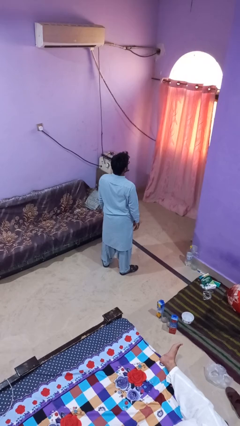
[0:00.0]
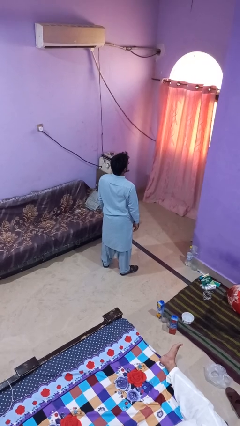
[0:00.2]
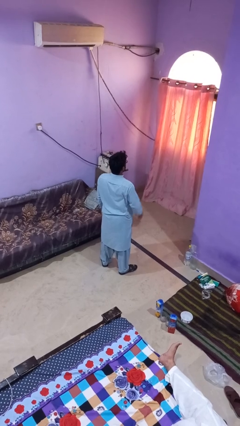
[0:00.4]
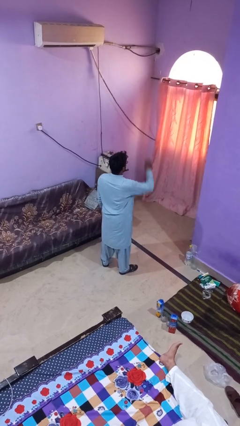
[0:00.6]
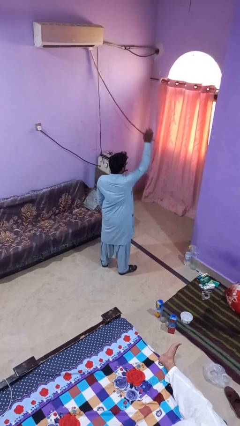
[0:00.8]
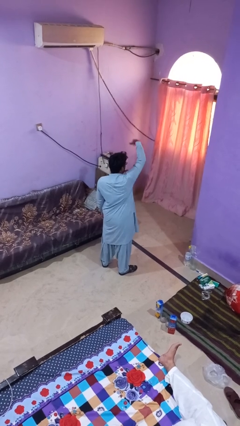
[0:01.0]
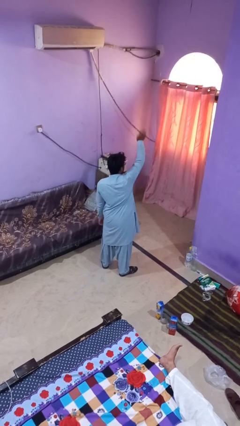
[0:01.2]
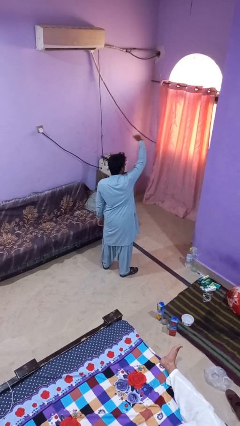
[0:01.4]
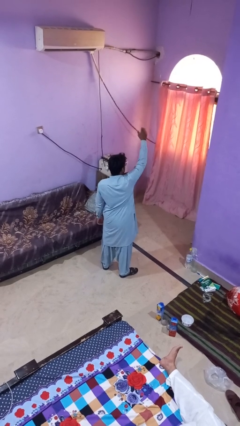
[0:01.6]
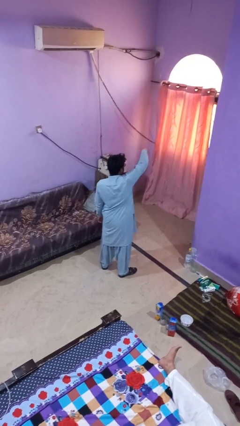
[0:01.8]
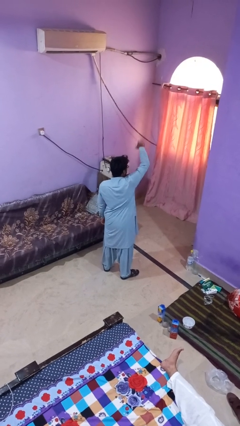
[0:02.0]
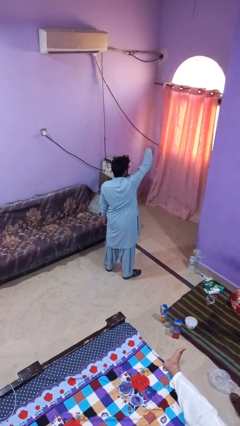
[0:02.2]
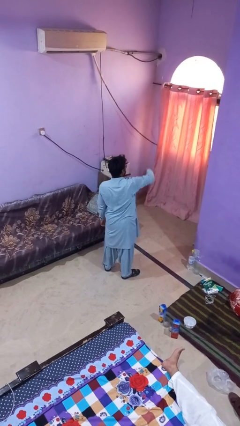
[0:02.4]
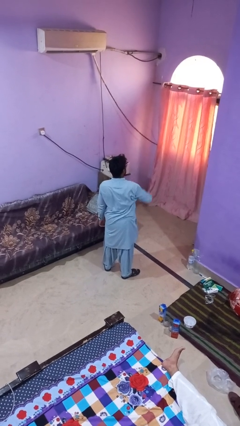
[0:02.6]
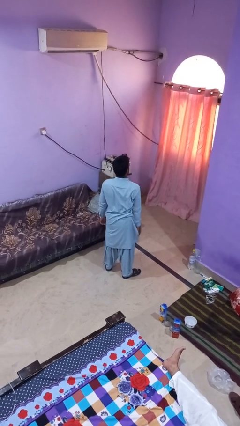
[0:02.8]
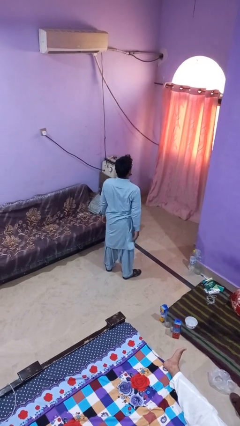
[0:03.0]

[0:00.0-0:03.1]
person gestures come here

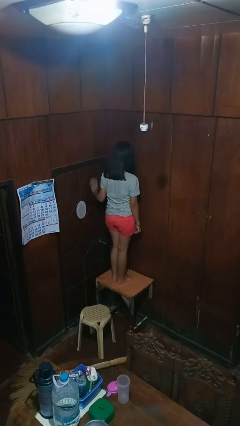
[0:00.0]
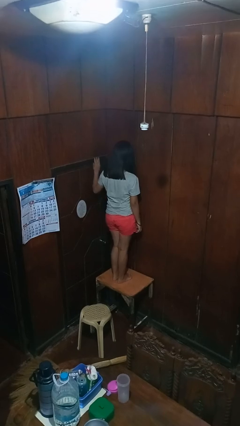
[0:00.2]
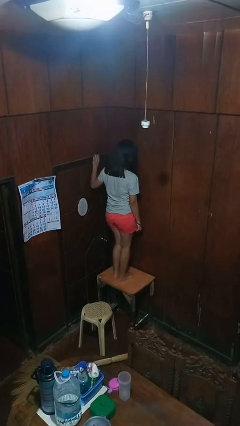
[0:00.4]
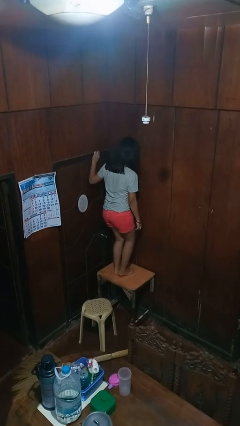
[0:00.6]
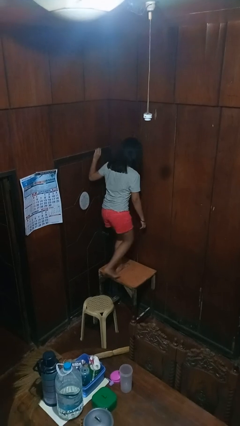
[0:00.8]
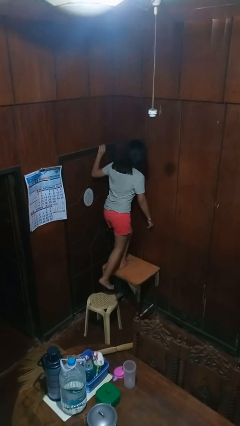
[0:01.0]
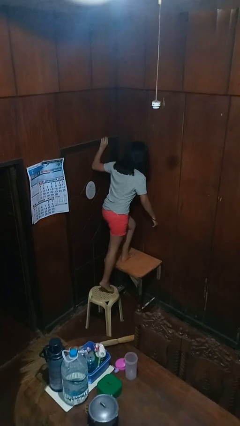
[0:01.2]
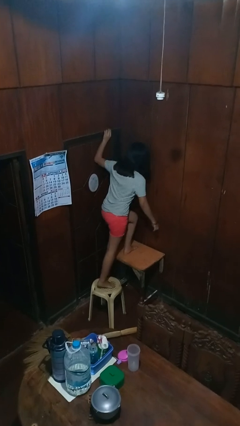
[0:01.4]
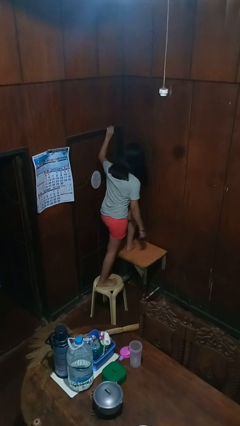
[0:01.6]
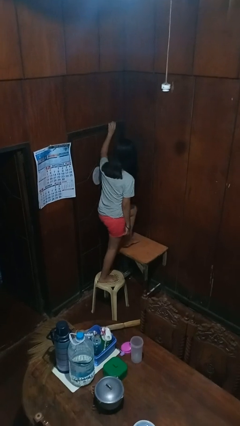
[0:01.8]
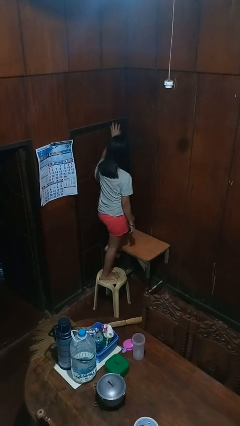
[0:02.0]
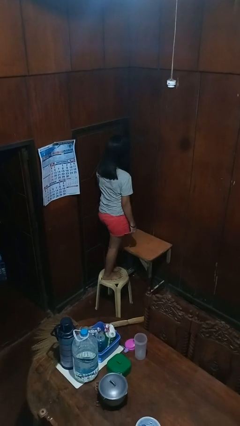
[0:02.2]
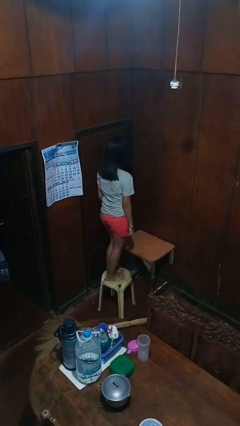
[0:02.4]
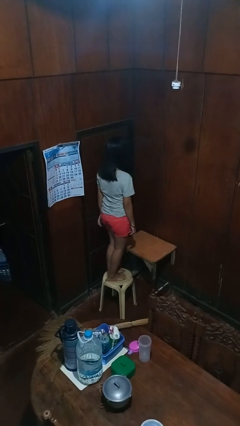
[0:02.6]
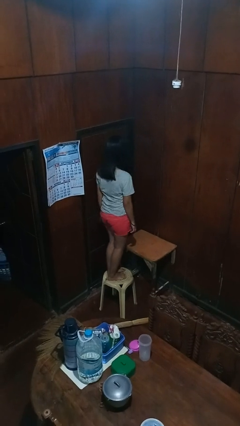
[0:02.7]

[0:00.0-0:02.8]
person climbs off table

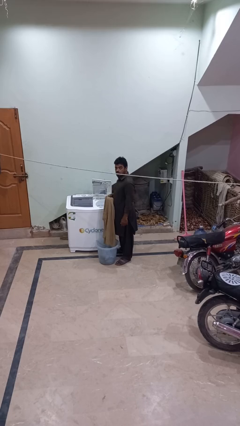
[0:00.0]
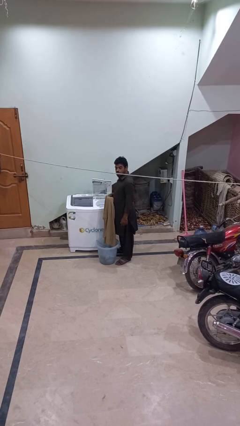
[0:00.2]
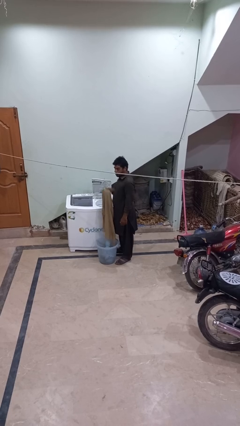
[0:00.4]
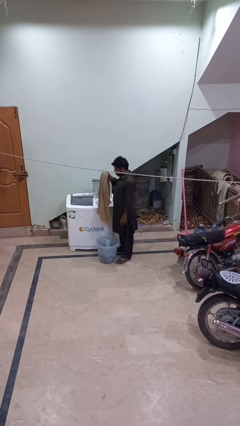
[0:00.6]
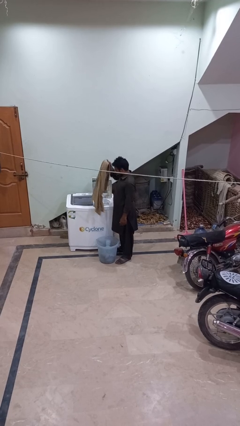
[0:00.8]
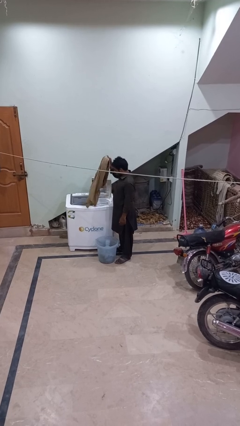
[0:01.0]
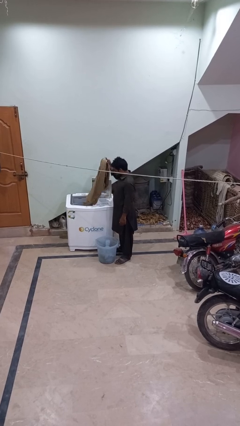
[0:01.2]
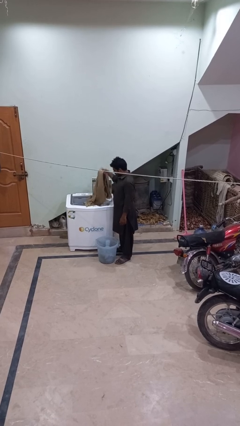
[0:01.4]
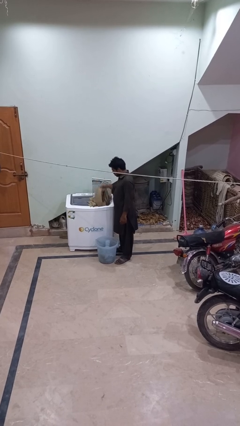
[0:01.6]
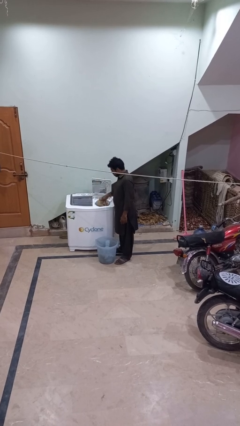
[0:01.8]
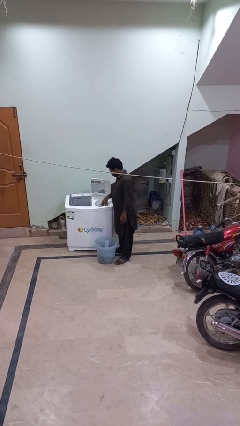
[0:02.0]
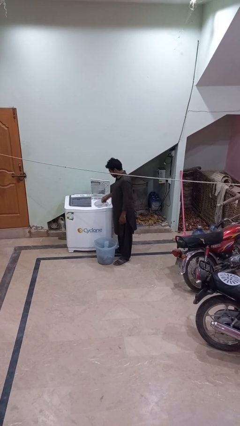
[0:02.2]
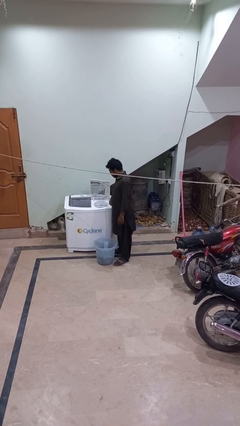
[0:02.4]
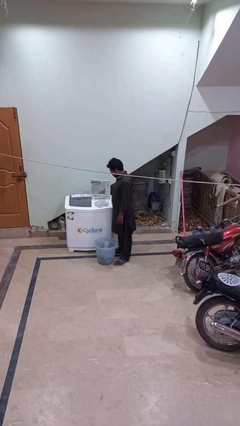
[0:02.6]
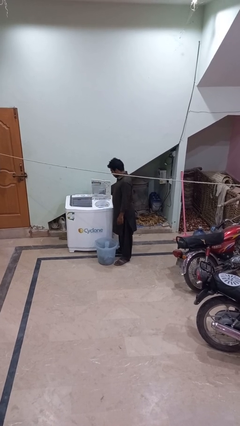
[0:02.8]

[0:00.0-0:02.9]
person loads dryer

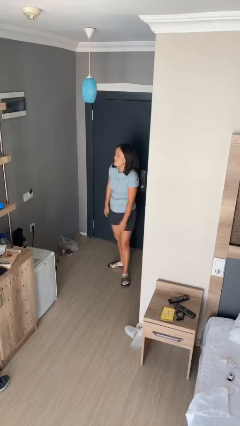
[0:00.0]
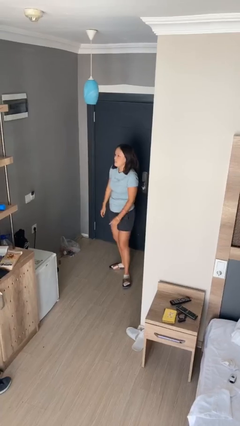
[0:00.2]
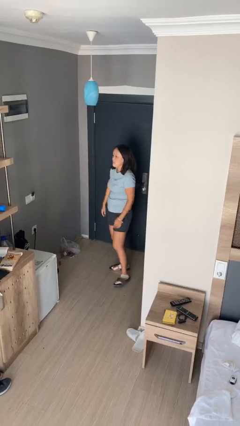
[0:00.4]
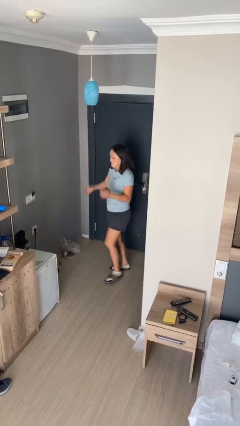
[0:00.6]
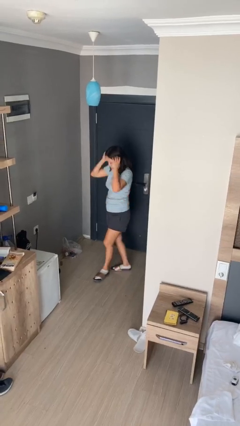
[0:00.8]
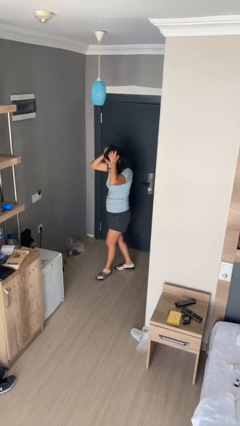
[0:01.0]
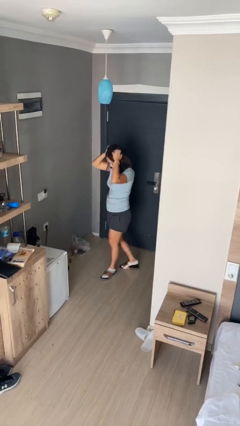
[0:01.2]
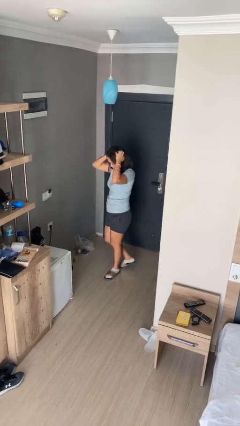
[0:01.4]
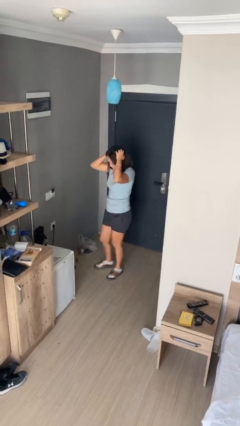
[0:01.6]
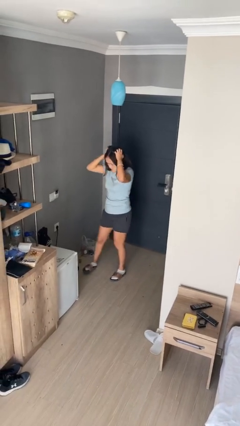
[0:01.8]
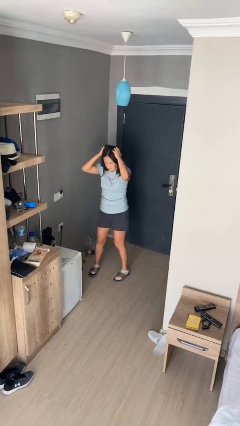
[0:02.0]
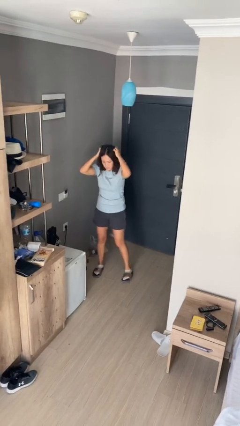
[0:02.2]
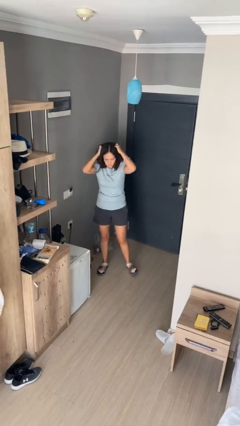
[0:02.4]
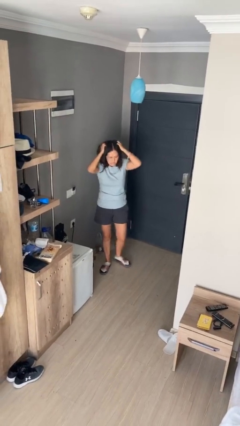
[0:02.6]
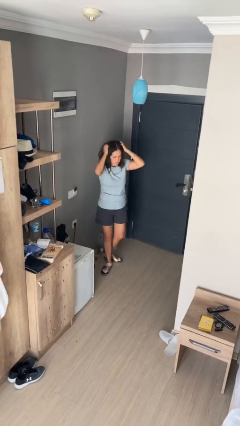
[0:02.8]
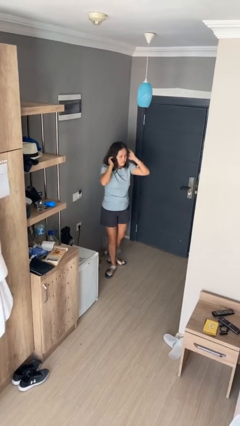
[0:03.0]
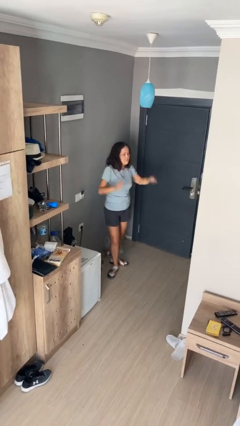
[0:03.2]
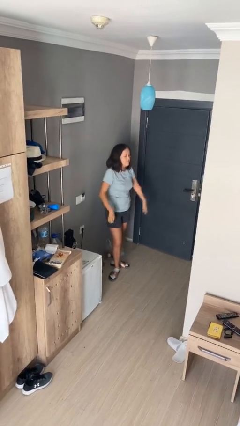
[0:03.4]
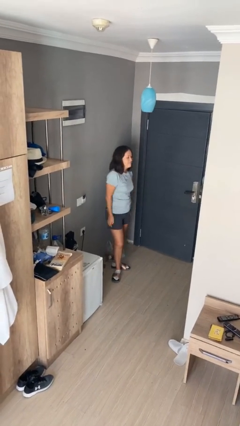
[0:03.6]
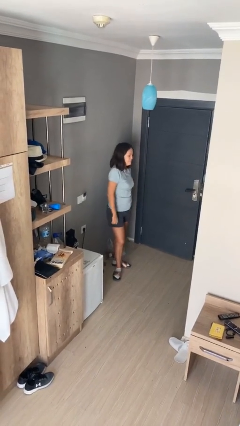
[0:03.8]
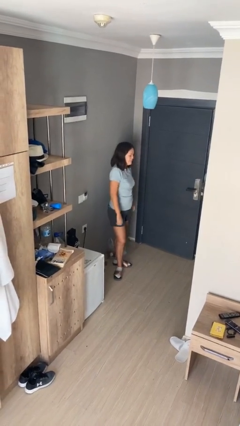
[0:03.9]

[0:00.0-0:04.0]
person scratches face

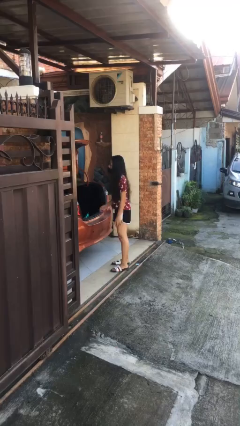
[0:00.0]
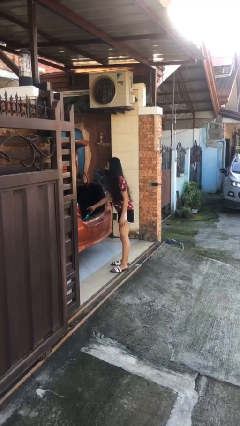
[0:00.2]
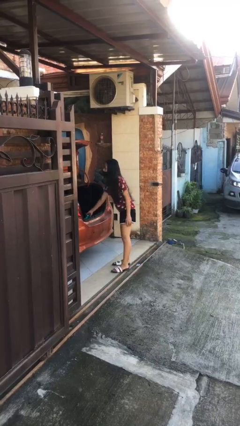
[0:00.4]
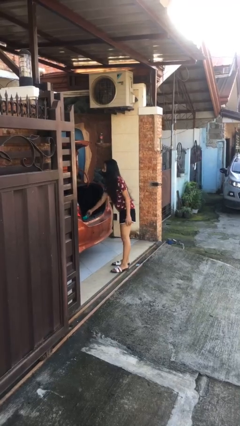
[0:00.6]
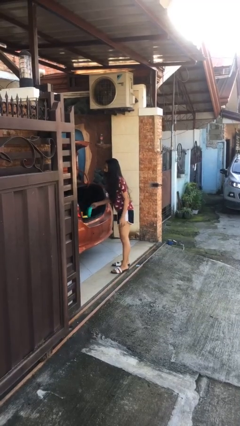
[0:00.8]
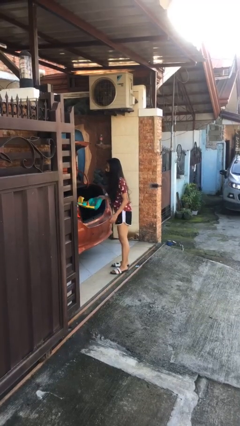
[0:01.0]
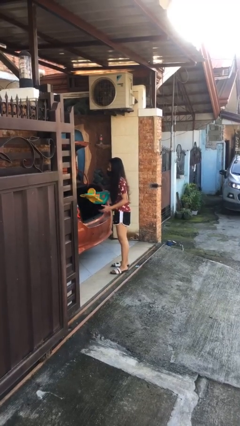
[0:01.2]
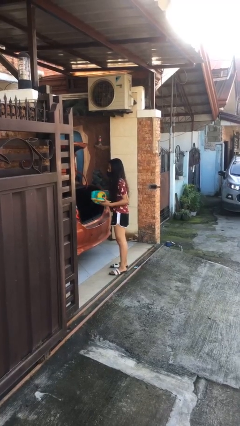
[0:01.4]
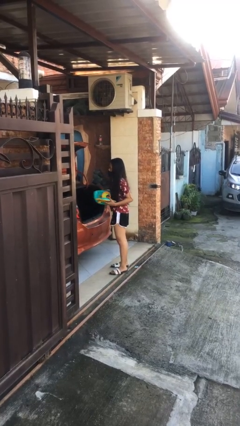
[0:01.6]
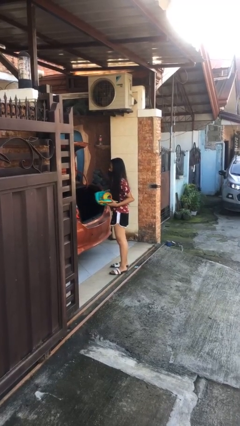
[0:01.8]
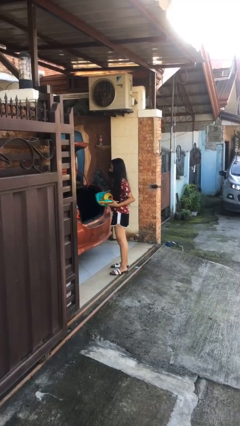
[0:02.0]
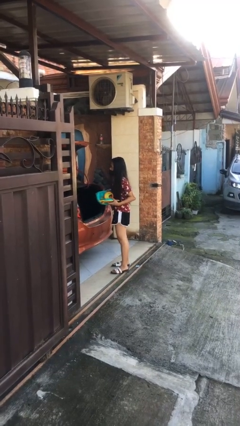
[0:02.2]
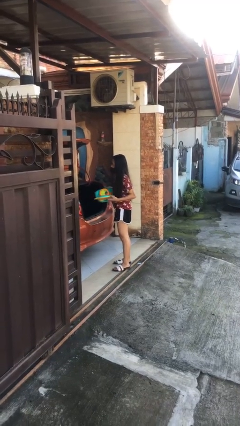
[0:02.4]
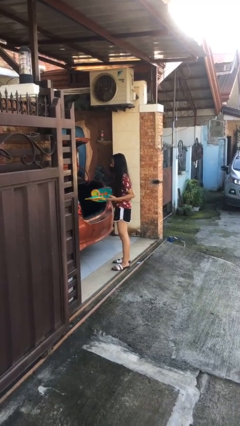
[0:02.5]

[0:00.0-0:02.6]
person unloads car

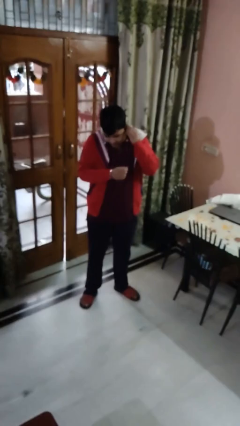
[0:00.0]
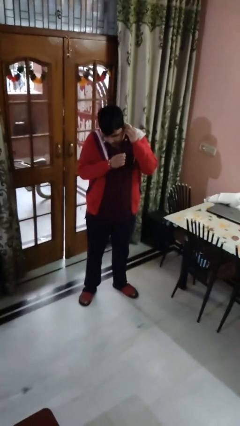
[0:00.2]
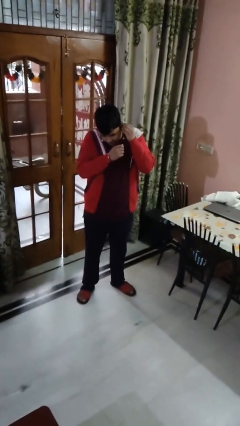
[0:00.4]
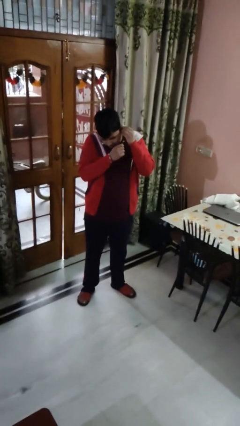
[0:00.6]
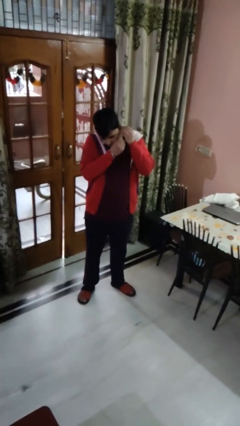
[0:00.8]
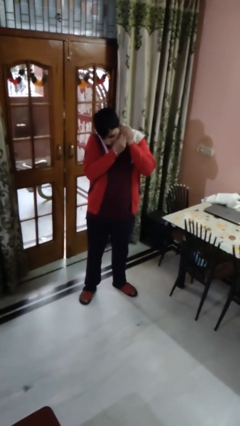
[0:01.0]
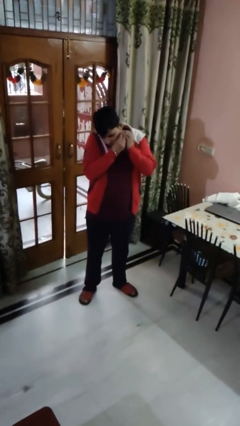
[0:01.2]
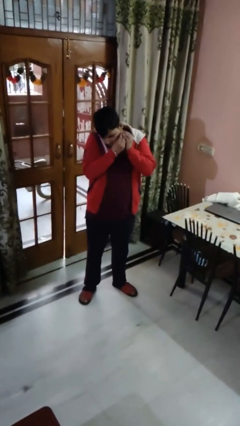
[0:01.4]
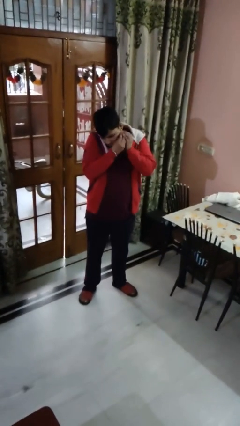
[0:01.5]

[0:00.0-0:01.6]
person puts on earrings

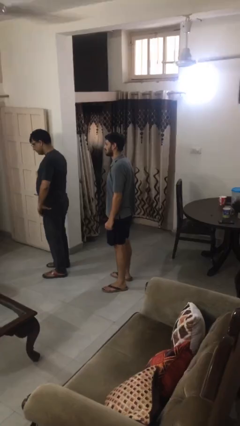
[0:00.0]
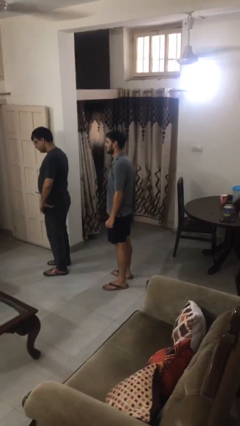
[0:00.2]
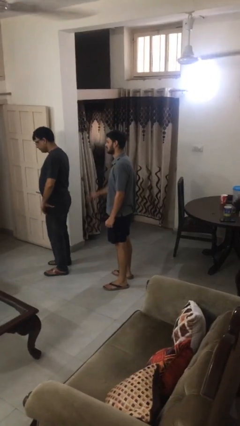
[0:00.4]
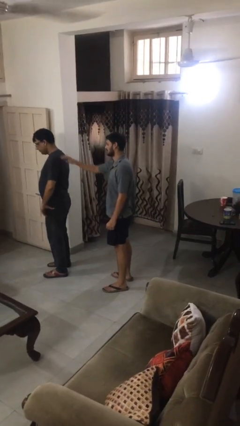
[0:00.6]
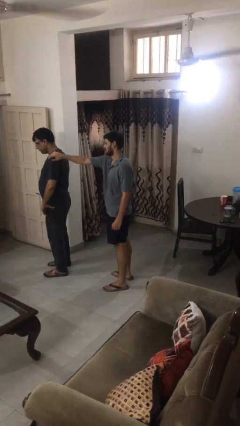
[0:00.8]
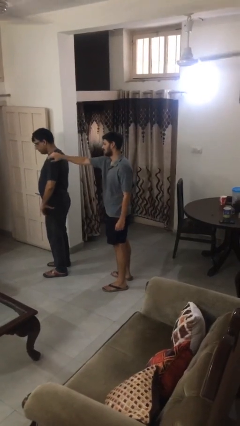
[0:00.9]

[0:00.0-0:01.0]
person grabs person by shoulder
